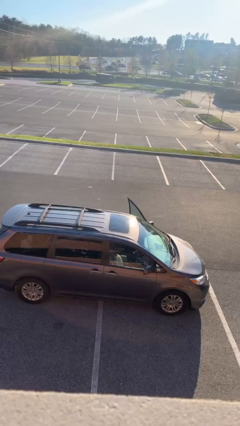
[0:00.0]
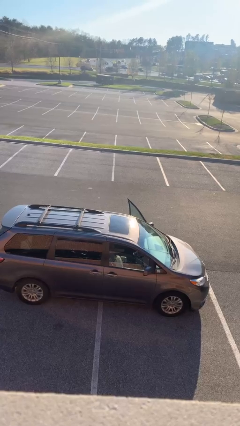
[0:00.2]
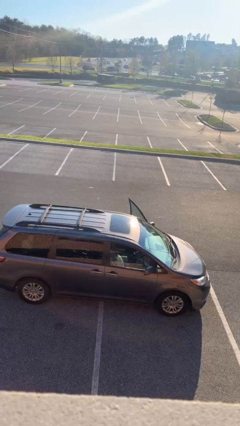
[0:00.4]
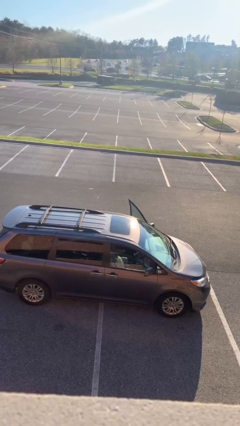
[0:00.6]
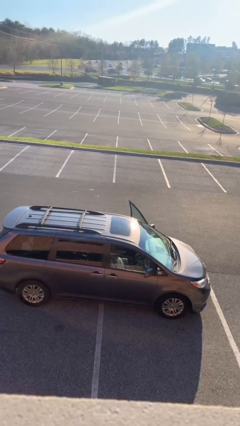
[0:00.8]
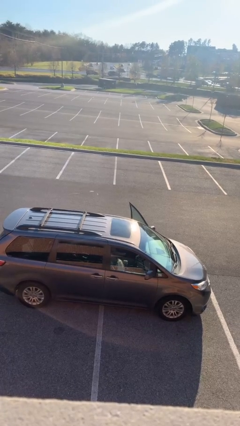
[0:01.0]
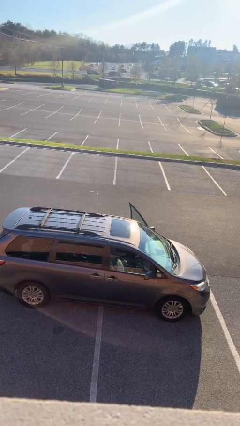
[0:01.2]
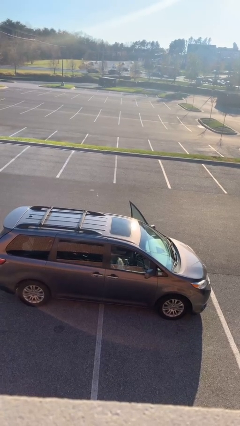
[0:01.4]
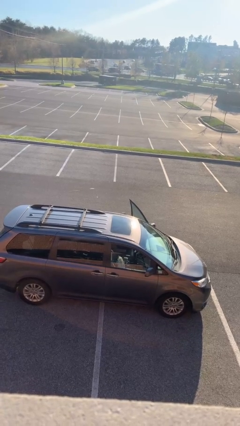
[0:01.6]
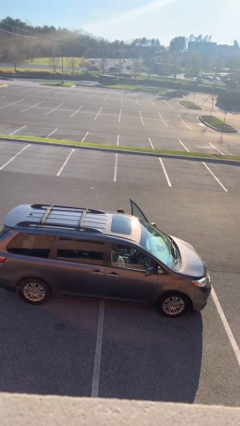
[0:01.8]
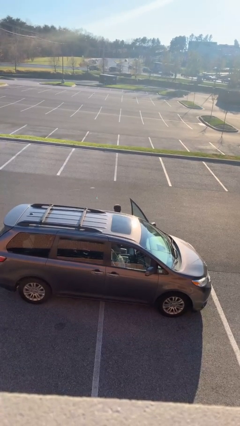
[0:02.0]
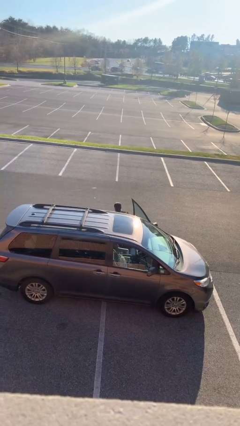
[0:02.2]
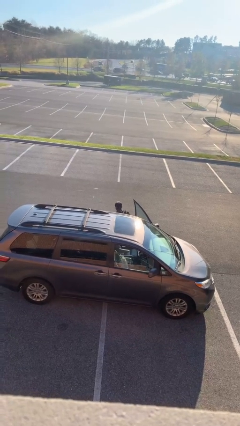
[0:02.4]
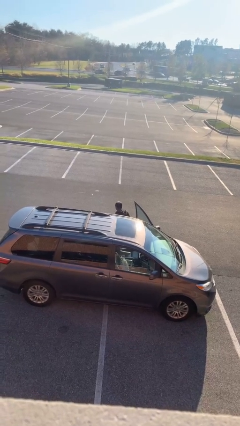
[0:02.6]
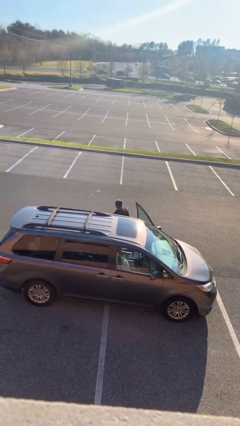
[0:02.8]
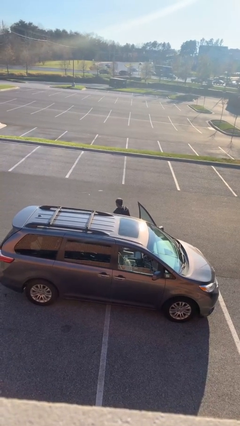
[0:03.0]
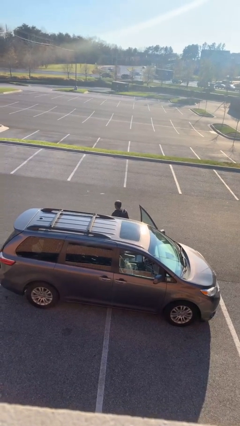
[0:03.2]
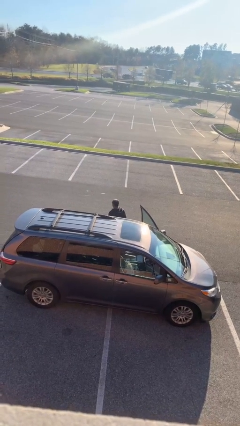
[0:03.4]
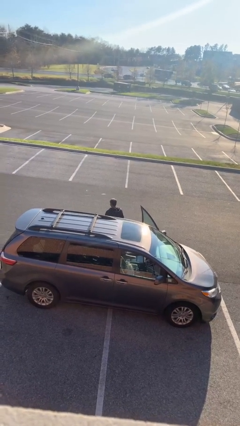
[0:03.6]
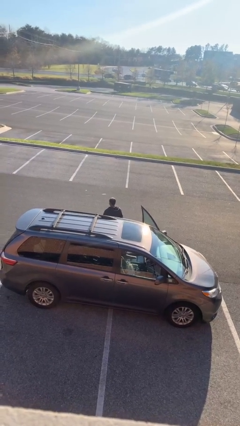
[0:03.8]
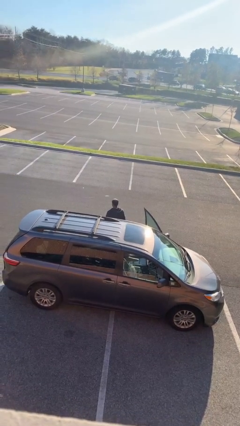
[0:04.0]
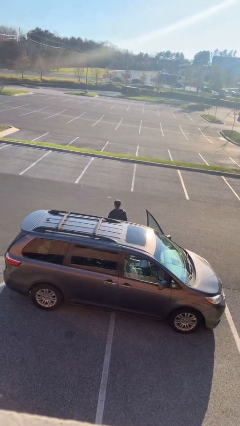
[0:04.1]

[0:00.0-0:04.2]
person exits car

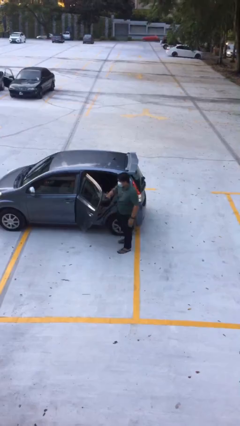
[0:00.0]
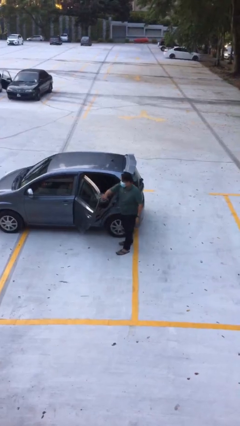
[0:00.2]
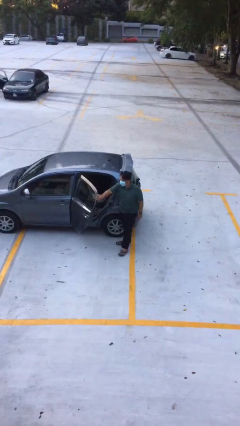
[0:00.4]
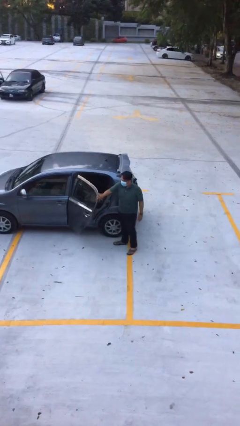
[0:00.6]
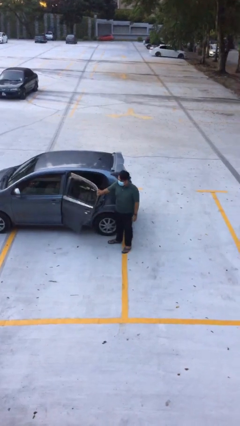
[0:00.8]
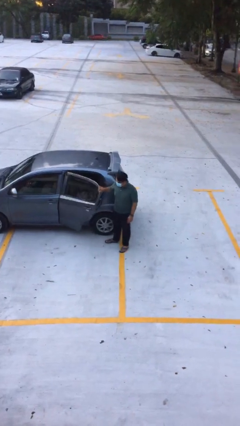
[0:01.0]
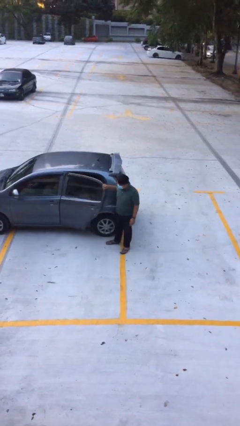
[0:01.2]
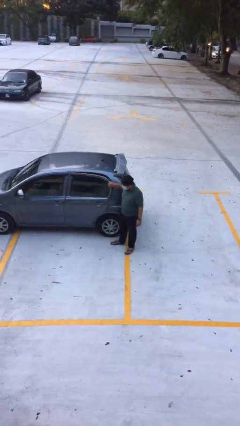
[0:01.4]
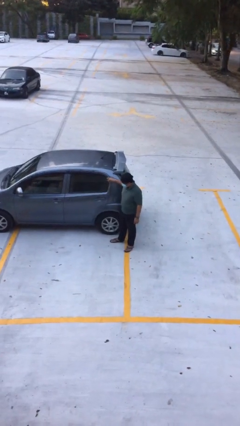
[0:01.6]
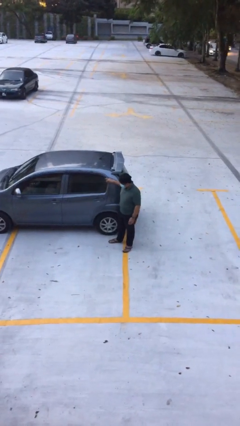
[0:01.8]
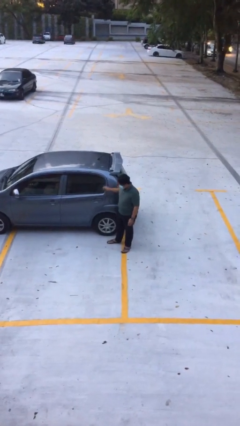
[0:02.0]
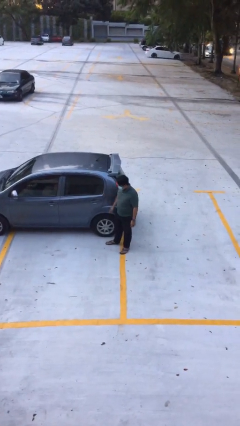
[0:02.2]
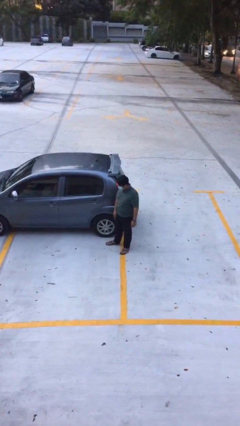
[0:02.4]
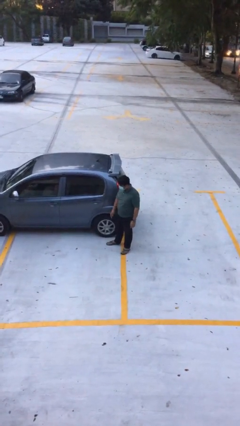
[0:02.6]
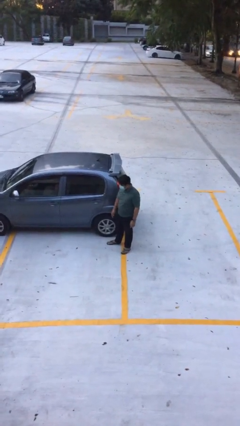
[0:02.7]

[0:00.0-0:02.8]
person closes car door

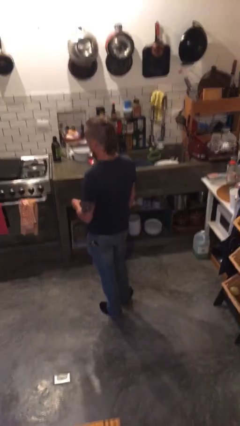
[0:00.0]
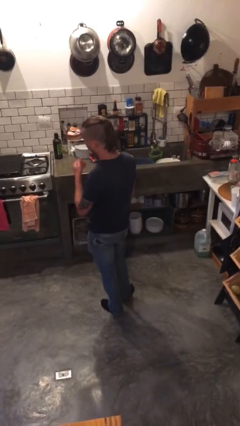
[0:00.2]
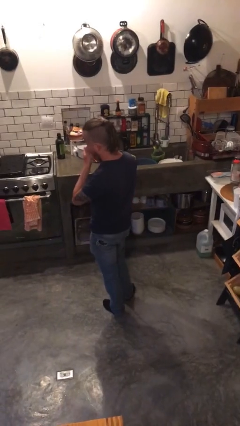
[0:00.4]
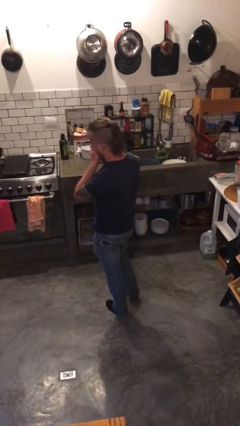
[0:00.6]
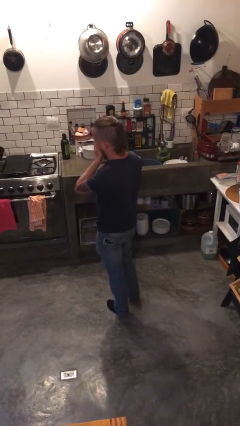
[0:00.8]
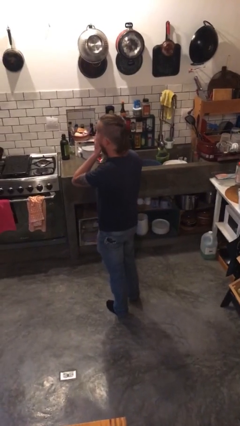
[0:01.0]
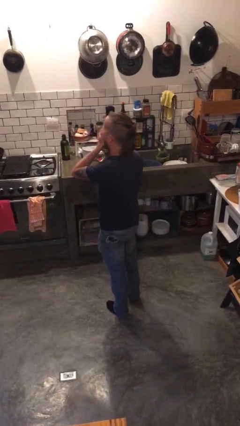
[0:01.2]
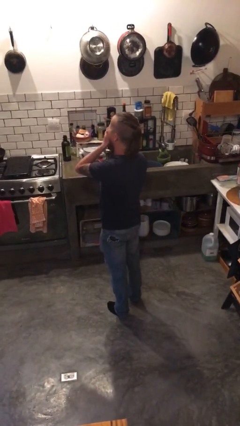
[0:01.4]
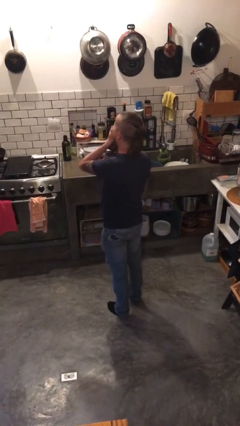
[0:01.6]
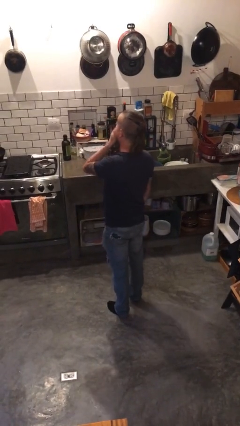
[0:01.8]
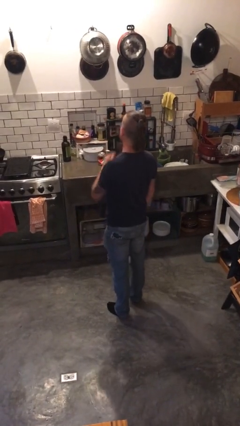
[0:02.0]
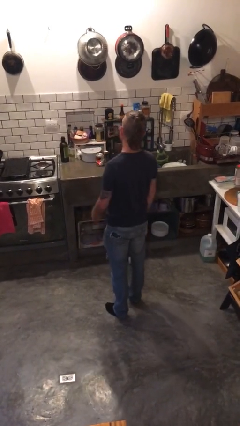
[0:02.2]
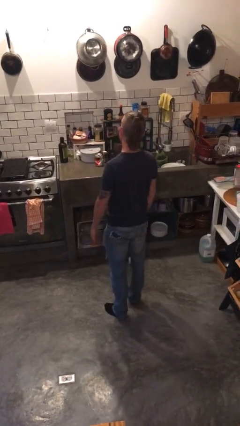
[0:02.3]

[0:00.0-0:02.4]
person yawns

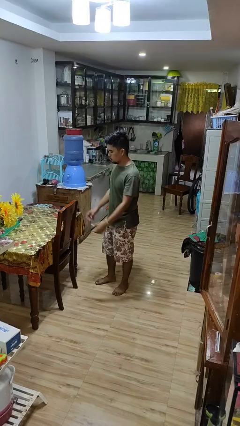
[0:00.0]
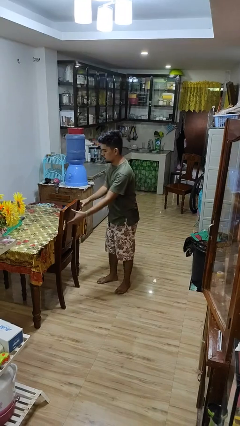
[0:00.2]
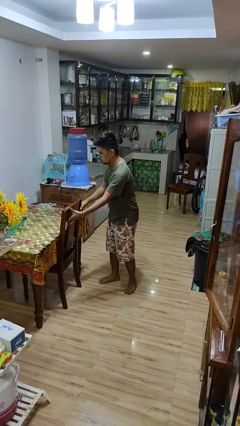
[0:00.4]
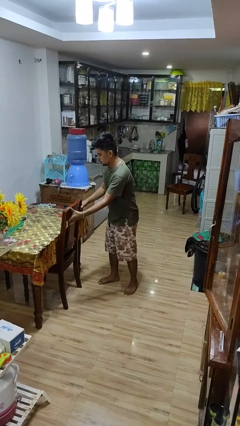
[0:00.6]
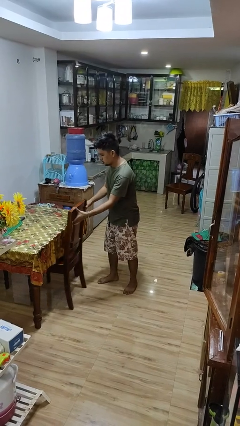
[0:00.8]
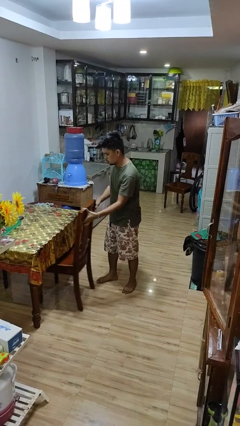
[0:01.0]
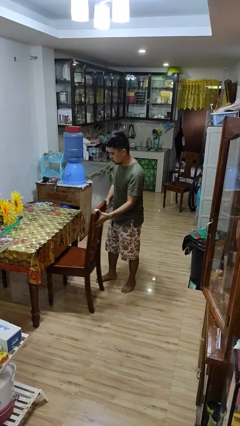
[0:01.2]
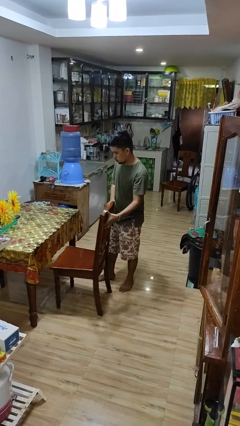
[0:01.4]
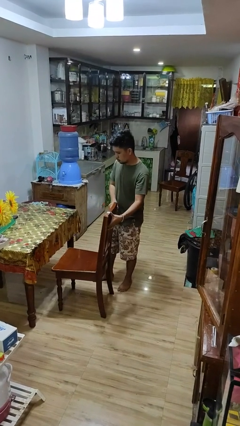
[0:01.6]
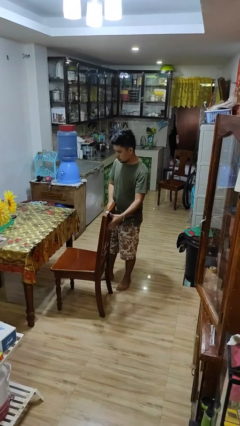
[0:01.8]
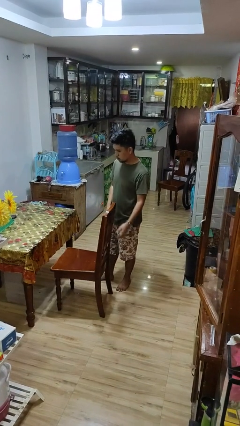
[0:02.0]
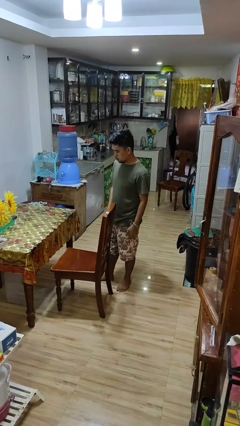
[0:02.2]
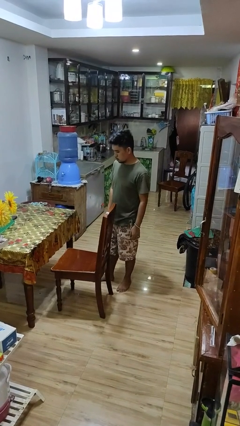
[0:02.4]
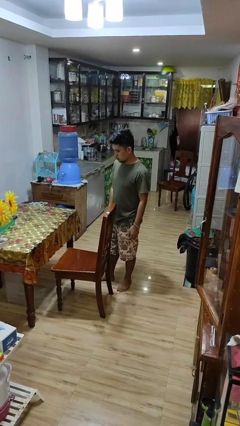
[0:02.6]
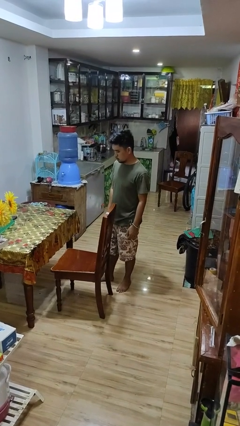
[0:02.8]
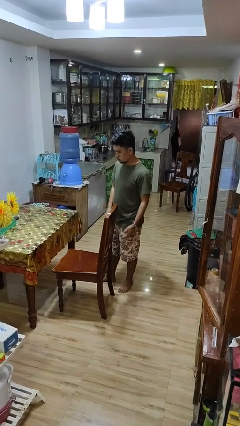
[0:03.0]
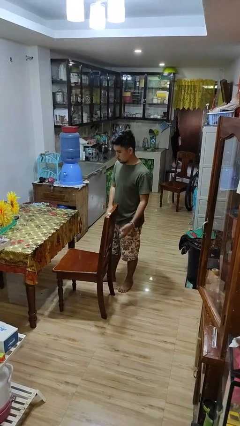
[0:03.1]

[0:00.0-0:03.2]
person pulls out chair

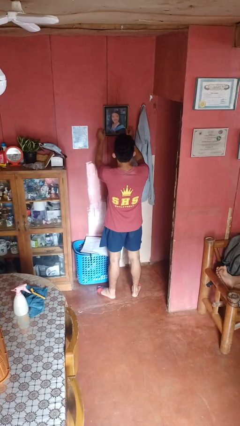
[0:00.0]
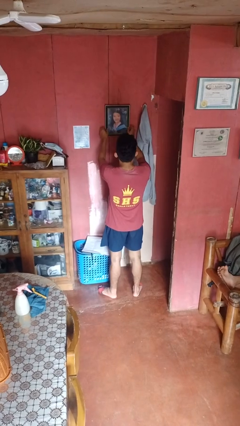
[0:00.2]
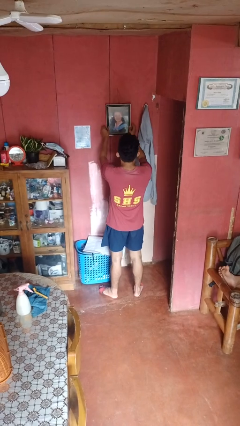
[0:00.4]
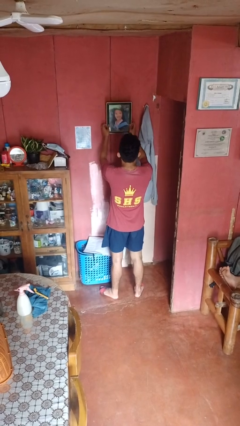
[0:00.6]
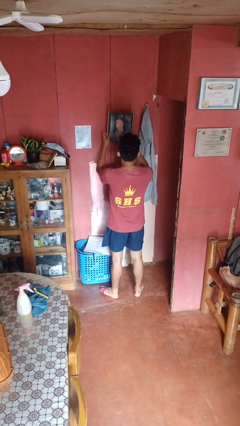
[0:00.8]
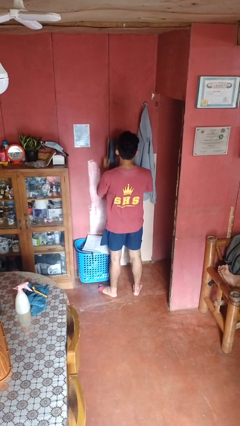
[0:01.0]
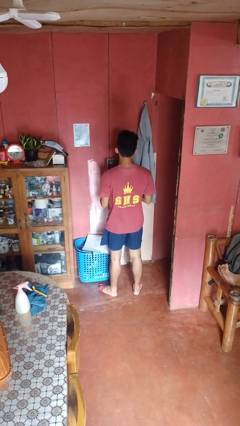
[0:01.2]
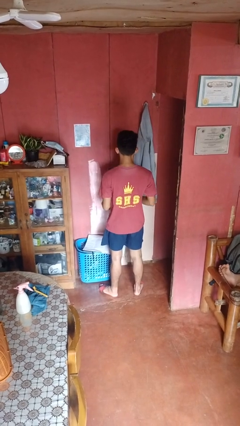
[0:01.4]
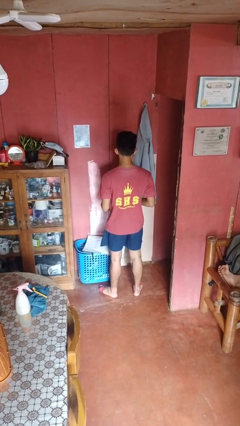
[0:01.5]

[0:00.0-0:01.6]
person takes down picture frame

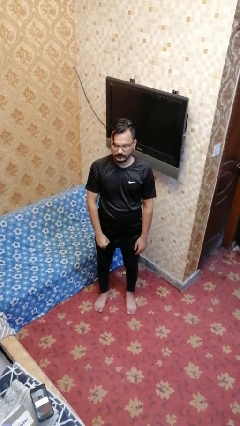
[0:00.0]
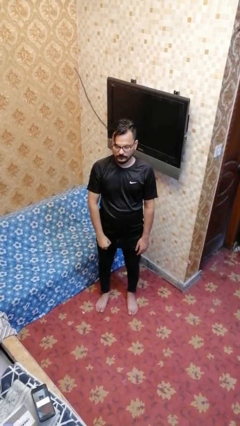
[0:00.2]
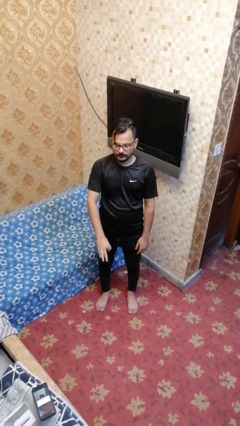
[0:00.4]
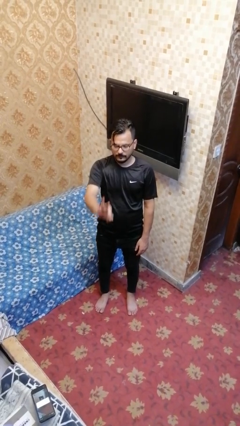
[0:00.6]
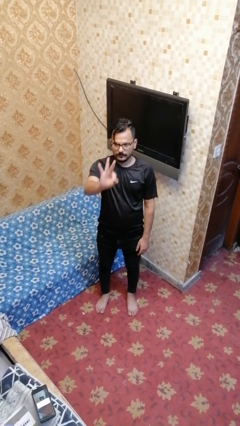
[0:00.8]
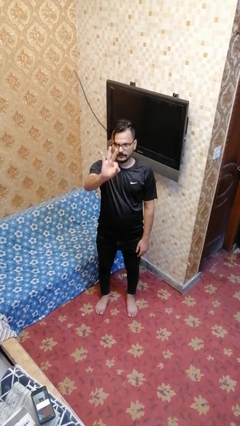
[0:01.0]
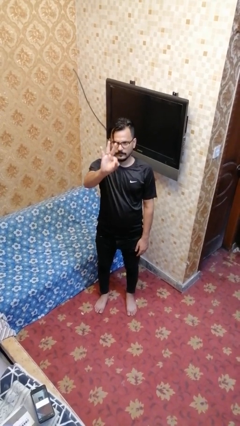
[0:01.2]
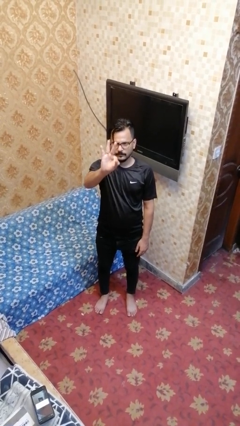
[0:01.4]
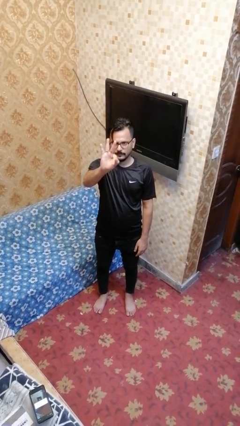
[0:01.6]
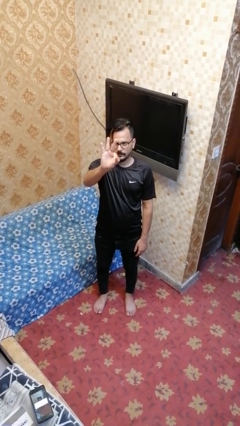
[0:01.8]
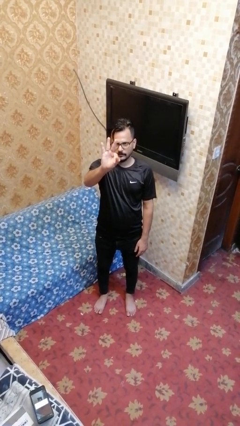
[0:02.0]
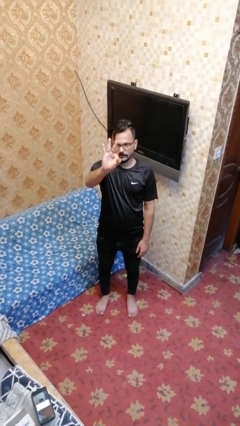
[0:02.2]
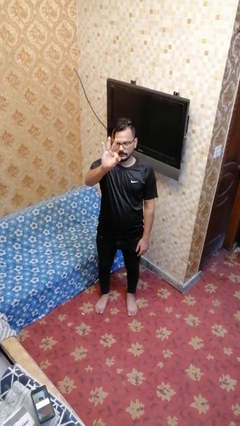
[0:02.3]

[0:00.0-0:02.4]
person gestures number three
